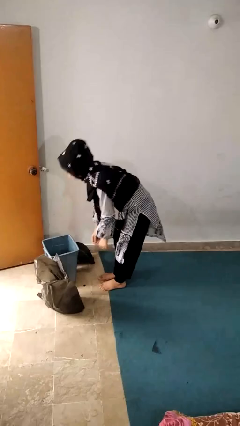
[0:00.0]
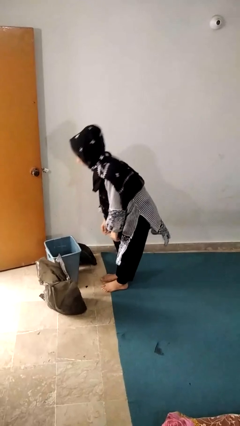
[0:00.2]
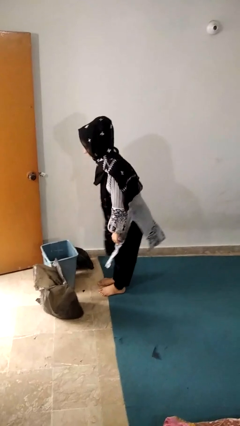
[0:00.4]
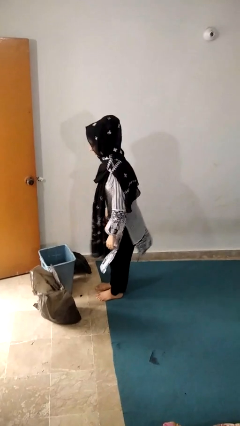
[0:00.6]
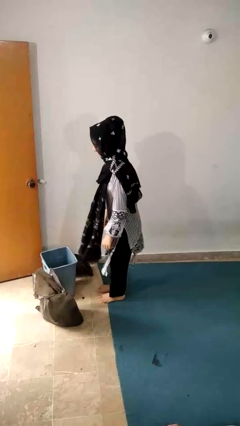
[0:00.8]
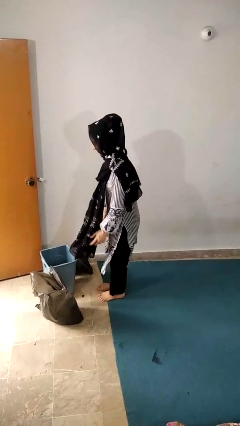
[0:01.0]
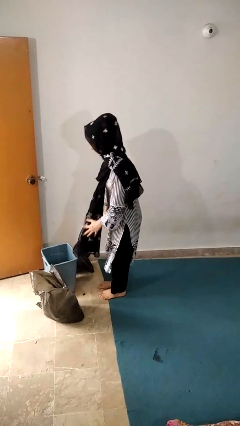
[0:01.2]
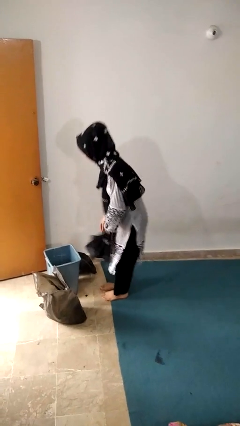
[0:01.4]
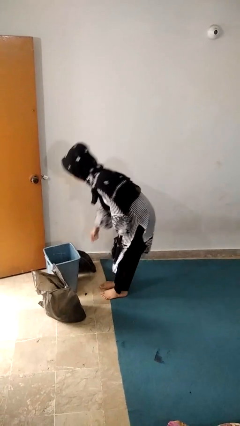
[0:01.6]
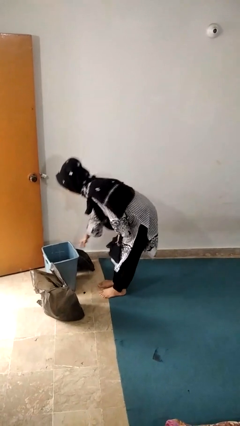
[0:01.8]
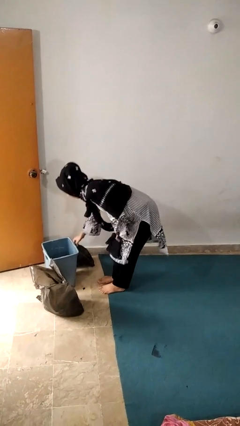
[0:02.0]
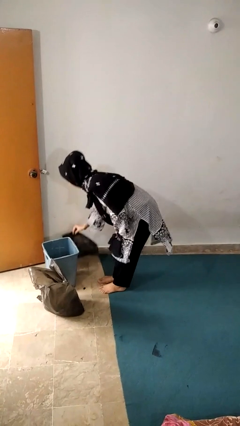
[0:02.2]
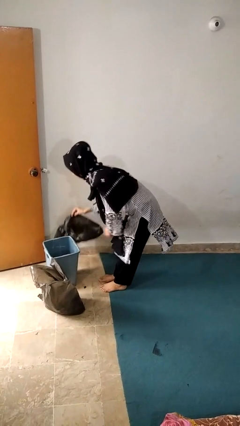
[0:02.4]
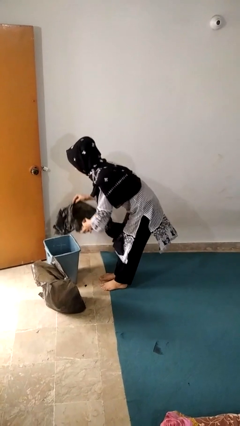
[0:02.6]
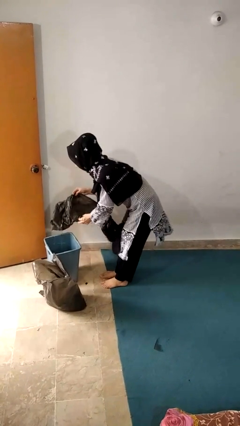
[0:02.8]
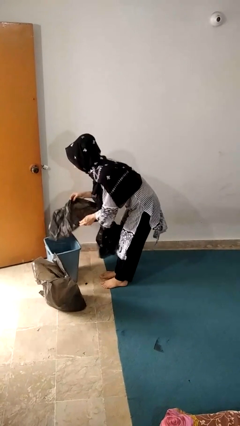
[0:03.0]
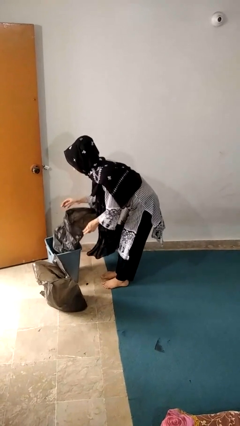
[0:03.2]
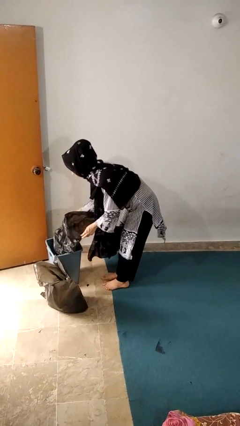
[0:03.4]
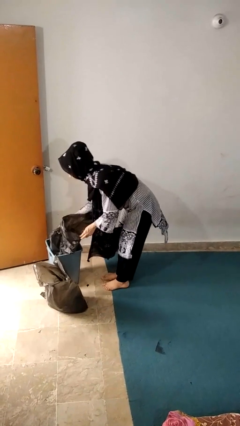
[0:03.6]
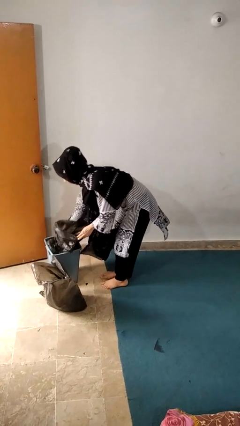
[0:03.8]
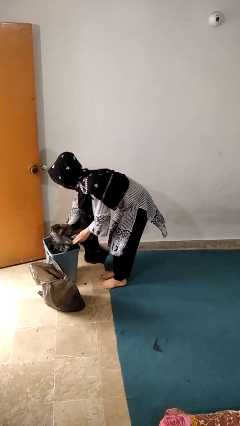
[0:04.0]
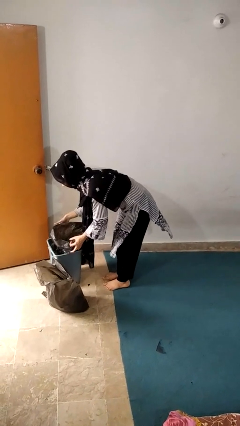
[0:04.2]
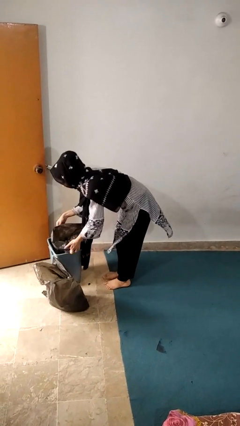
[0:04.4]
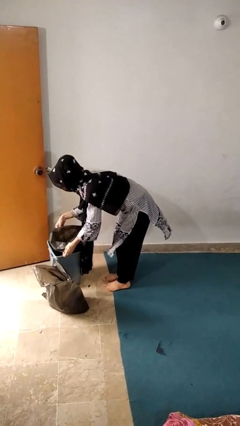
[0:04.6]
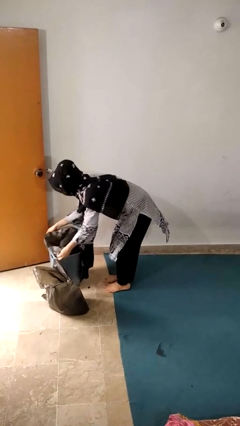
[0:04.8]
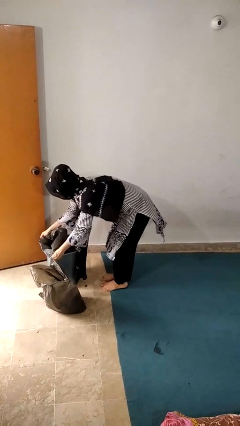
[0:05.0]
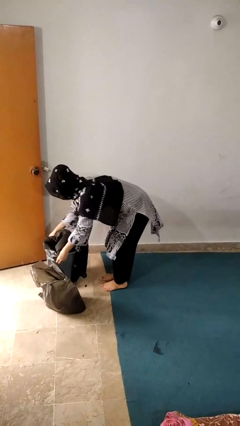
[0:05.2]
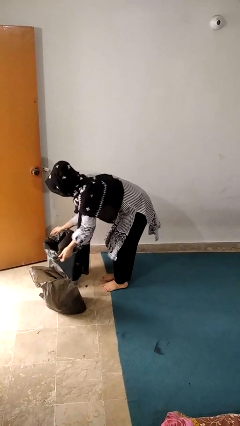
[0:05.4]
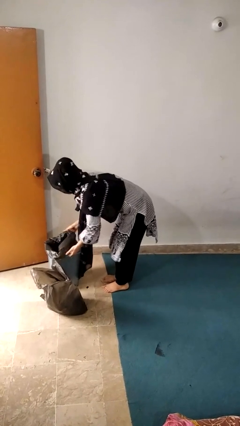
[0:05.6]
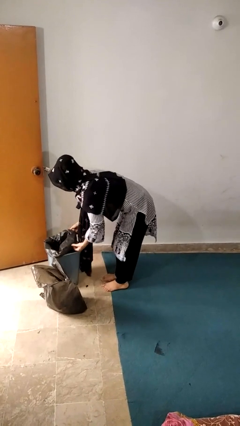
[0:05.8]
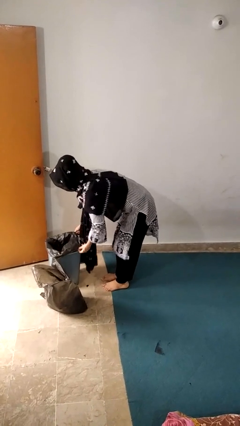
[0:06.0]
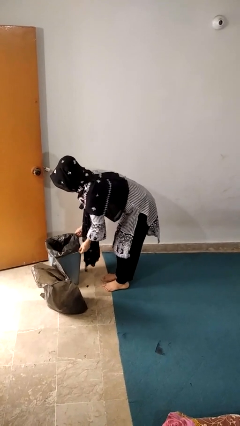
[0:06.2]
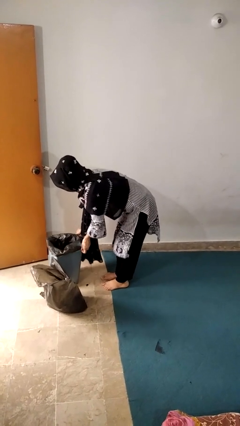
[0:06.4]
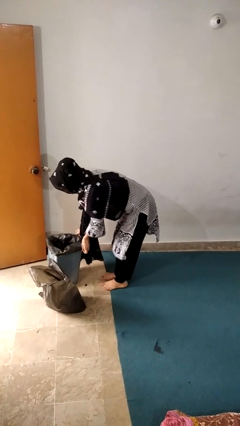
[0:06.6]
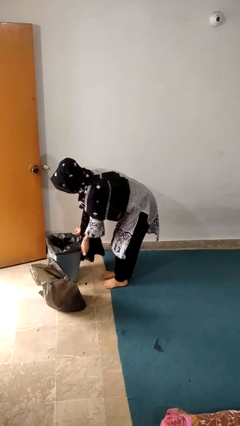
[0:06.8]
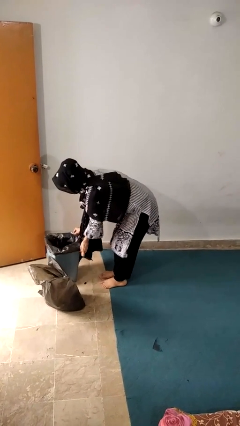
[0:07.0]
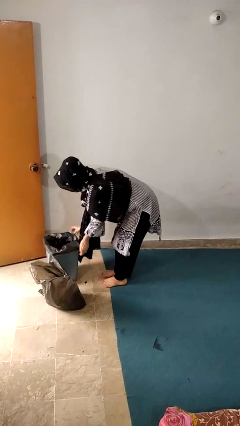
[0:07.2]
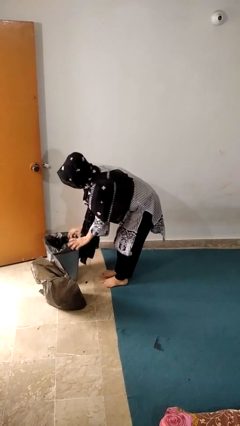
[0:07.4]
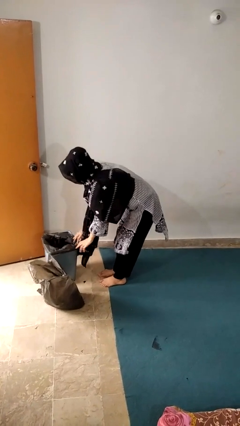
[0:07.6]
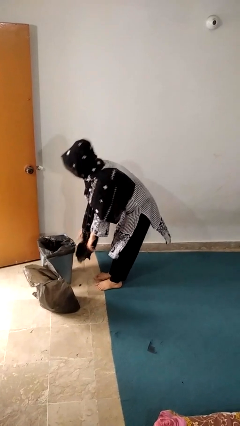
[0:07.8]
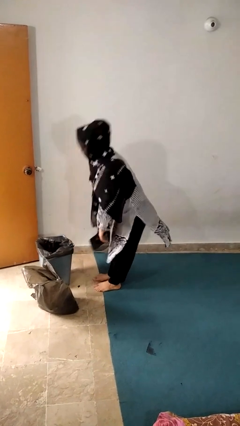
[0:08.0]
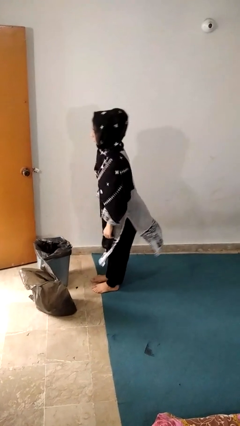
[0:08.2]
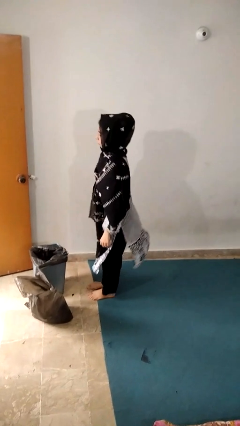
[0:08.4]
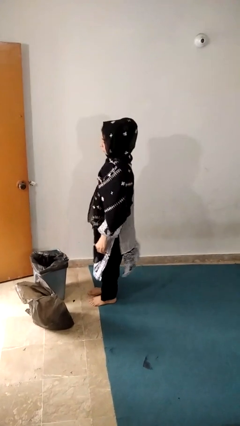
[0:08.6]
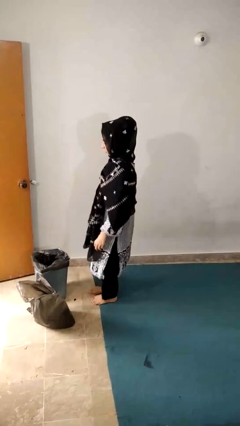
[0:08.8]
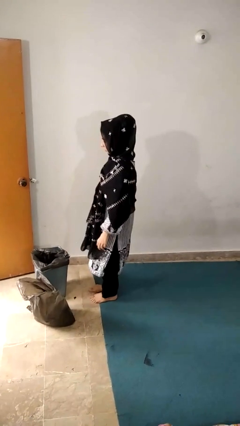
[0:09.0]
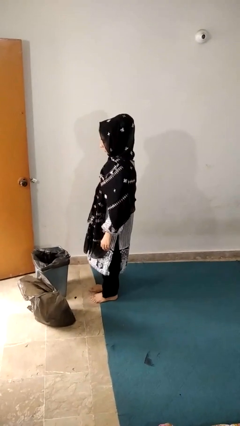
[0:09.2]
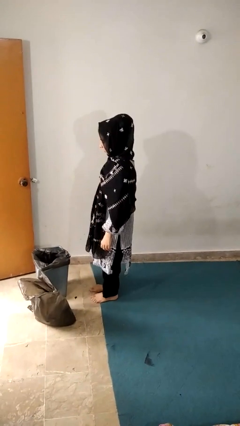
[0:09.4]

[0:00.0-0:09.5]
person inserts trashbag into trashcan

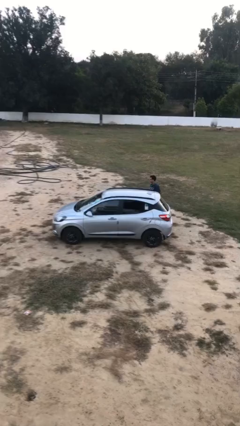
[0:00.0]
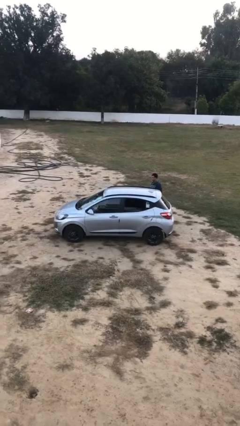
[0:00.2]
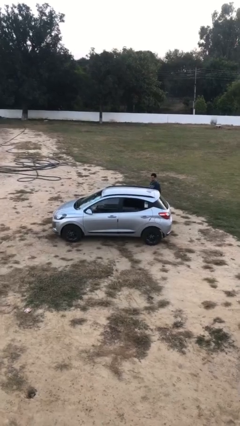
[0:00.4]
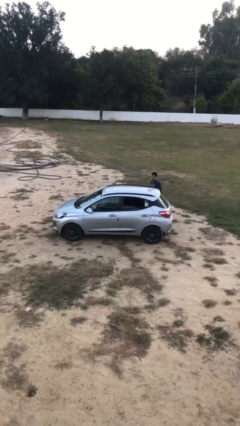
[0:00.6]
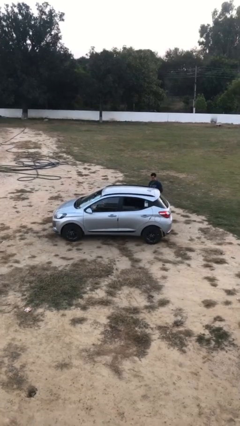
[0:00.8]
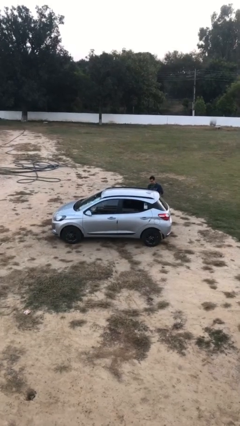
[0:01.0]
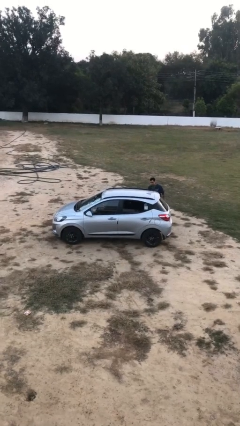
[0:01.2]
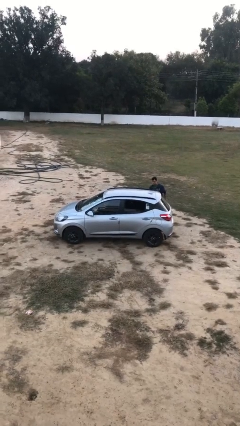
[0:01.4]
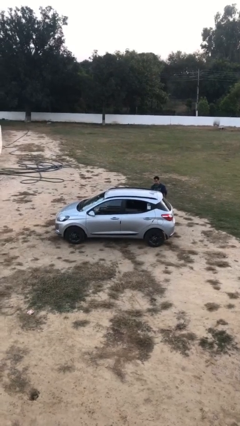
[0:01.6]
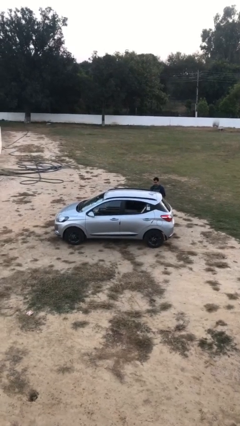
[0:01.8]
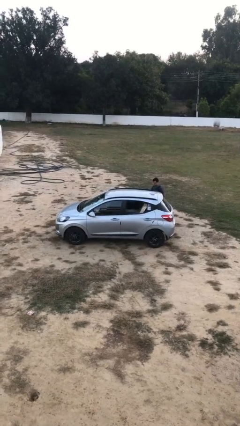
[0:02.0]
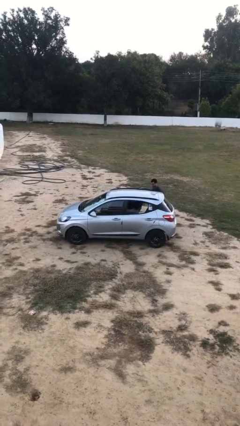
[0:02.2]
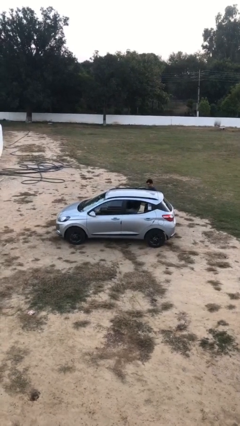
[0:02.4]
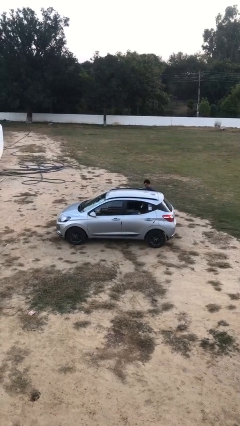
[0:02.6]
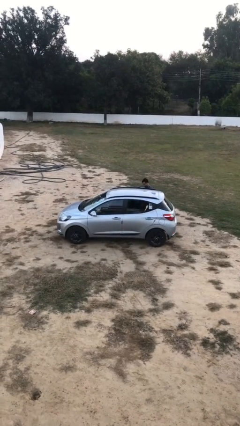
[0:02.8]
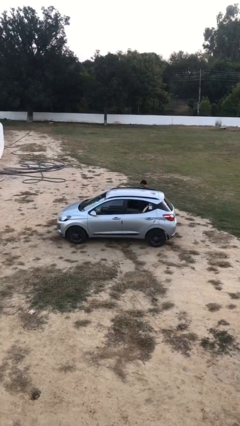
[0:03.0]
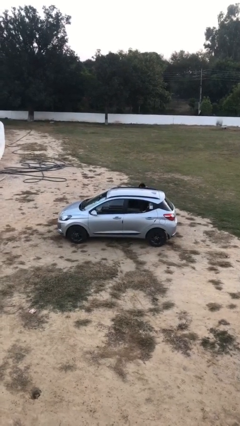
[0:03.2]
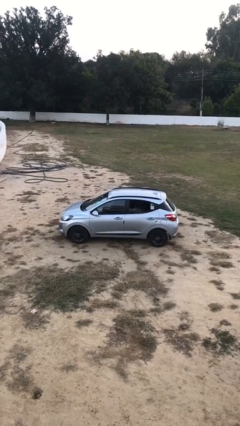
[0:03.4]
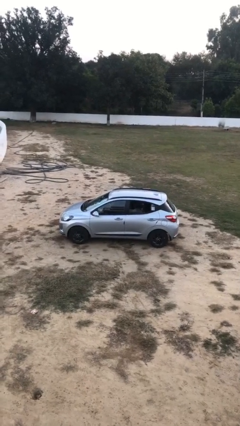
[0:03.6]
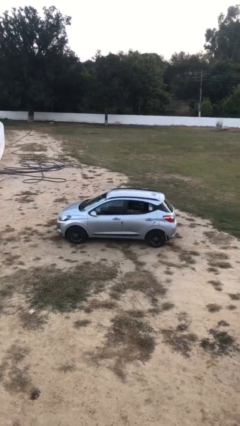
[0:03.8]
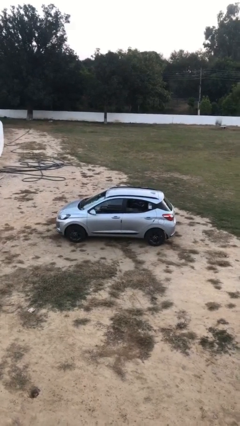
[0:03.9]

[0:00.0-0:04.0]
car picks up person

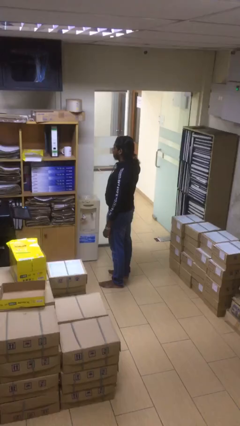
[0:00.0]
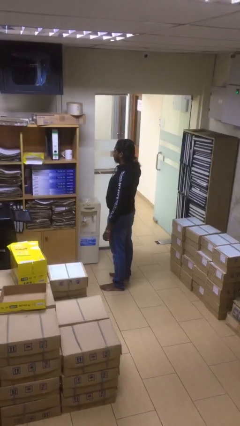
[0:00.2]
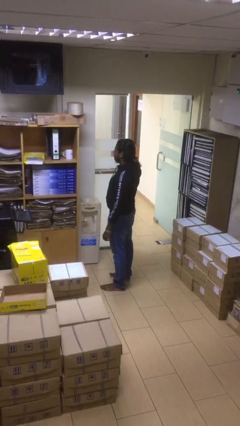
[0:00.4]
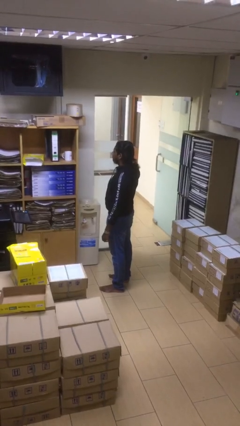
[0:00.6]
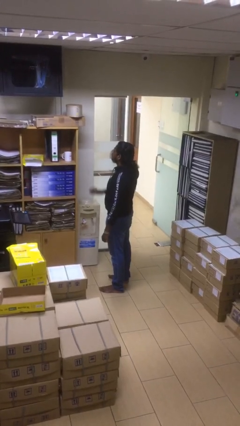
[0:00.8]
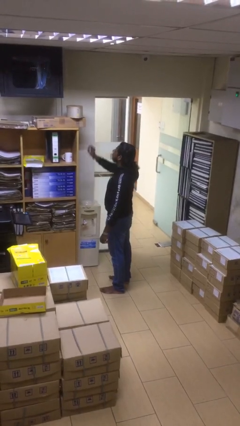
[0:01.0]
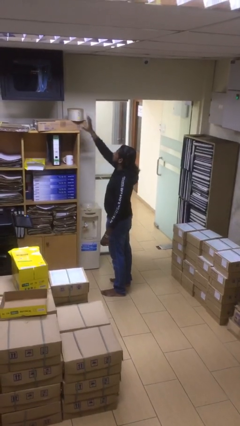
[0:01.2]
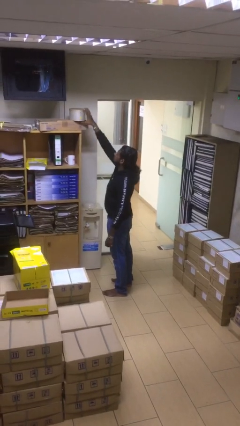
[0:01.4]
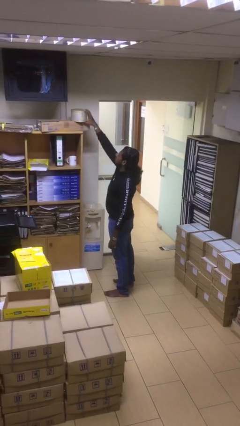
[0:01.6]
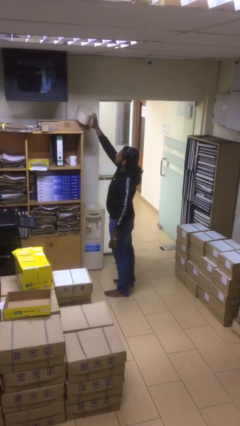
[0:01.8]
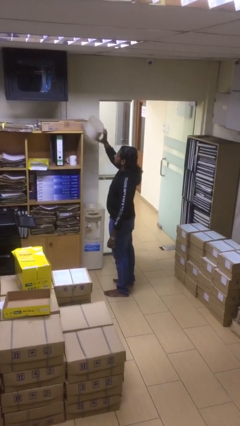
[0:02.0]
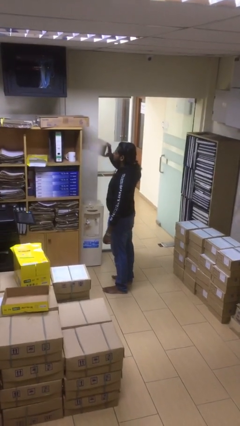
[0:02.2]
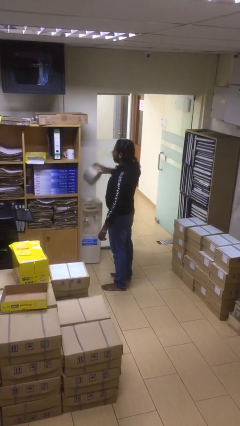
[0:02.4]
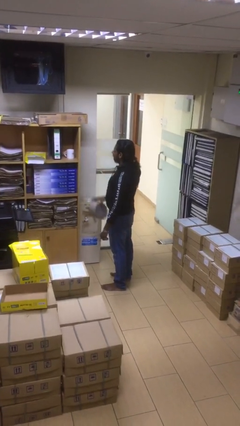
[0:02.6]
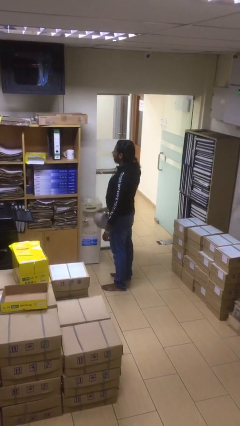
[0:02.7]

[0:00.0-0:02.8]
person picks up object from shelf

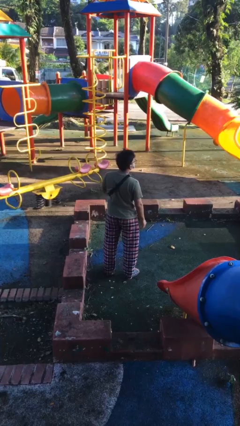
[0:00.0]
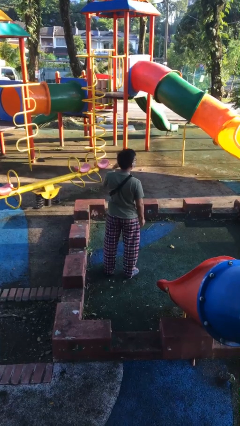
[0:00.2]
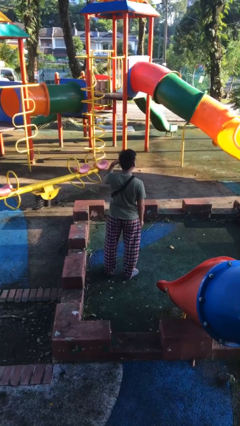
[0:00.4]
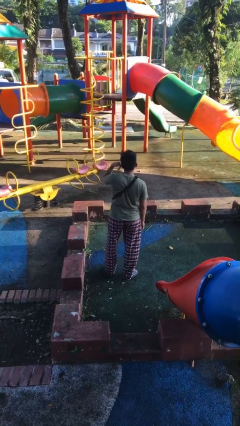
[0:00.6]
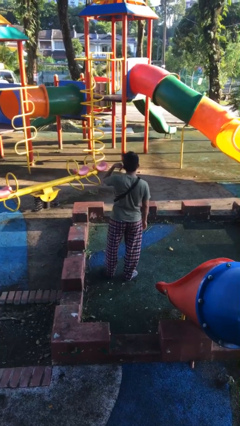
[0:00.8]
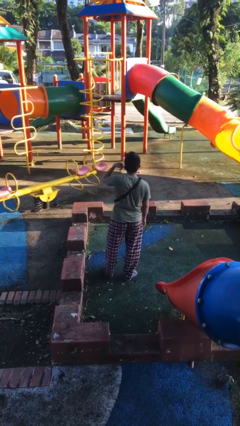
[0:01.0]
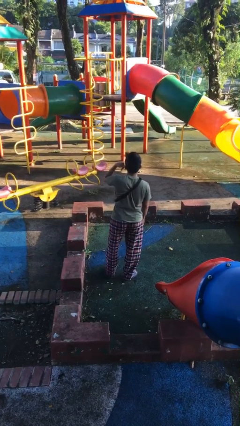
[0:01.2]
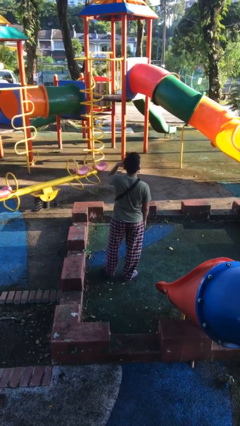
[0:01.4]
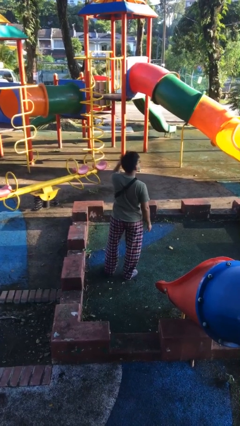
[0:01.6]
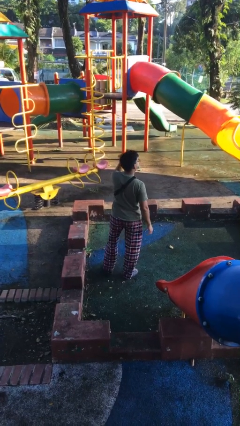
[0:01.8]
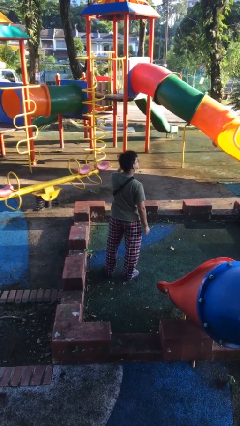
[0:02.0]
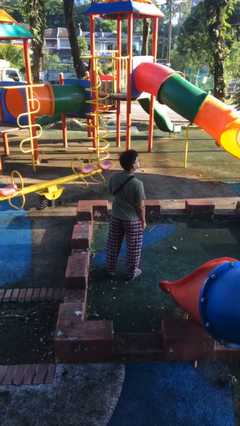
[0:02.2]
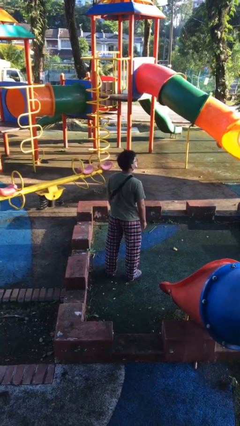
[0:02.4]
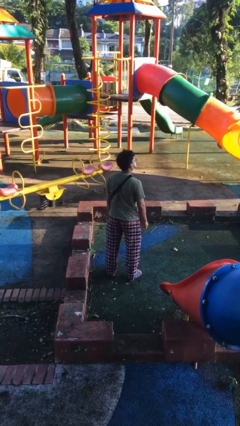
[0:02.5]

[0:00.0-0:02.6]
person gestures call me
